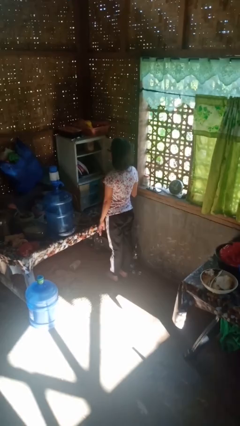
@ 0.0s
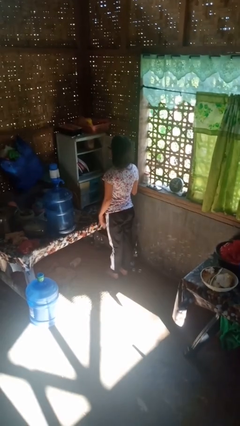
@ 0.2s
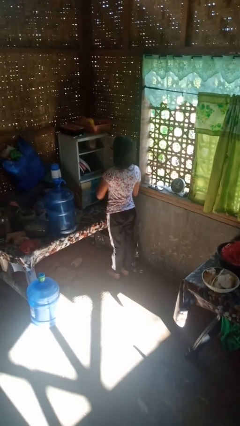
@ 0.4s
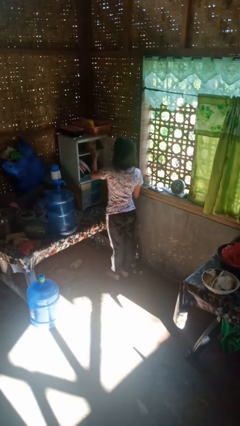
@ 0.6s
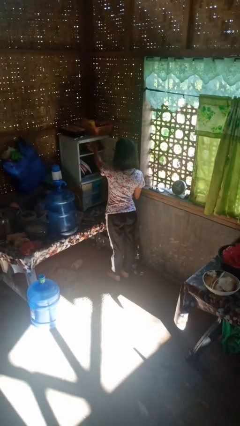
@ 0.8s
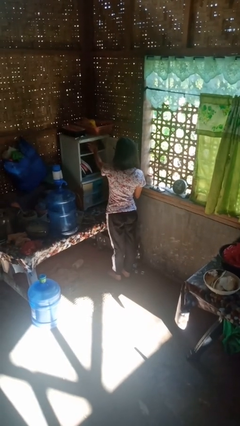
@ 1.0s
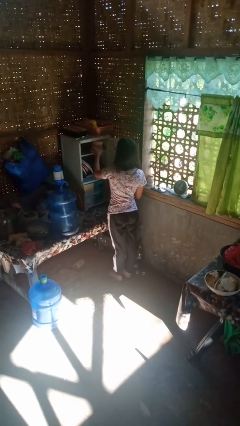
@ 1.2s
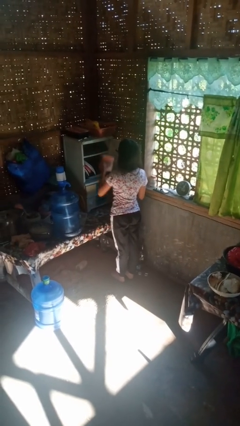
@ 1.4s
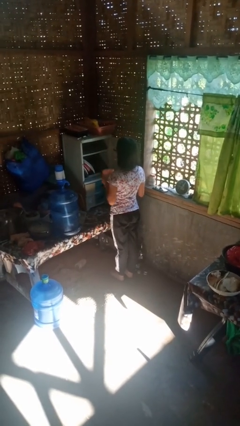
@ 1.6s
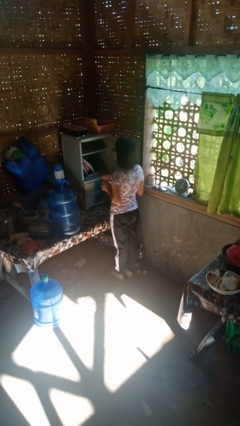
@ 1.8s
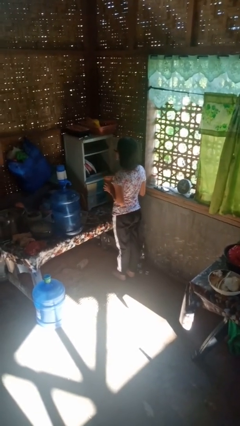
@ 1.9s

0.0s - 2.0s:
person picks up object from cabinet

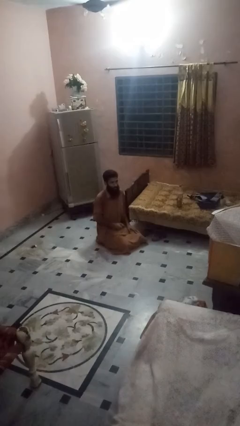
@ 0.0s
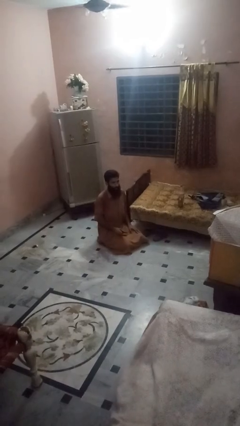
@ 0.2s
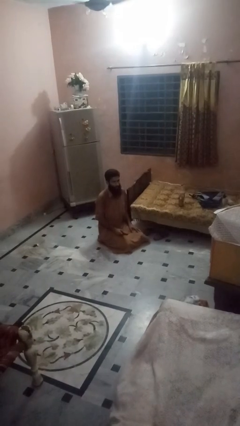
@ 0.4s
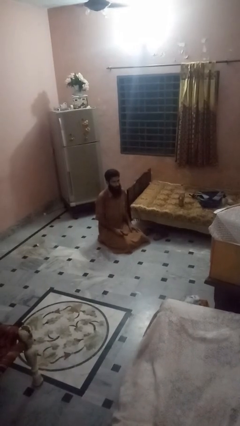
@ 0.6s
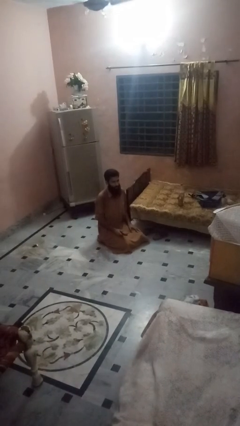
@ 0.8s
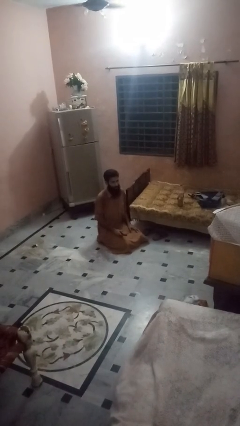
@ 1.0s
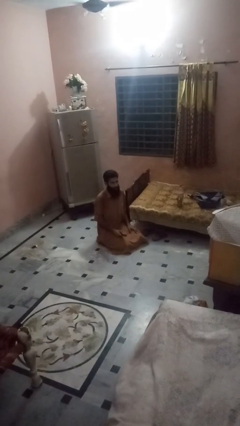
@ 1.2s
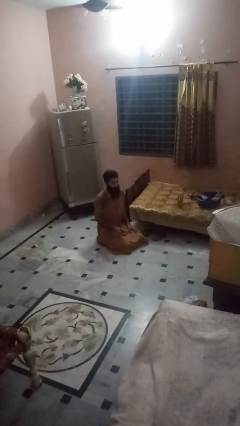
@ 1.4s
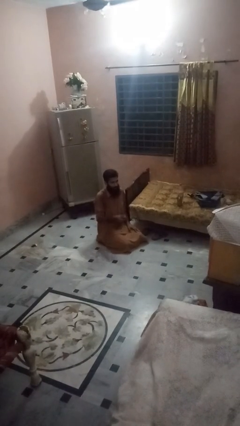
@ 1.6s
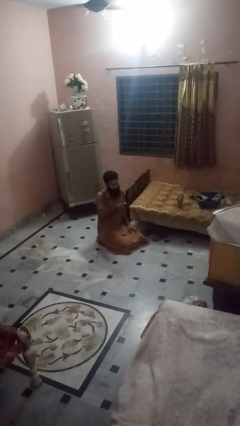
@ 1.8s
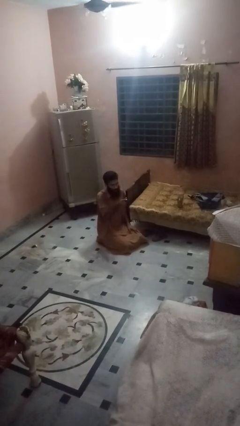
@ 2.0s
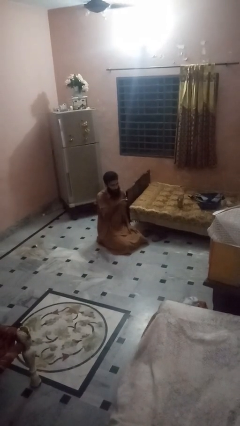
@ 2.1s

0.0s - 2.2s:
person uses television remote

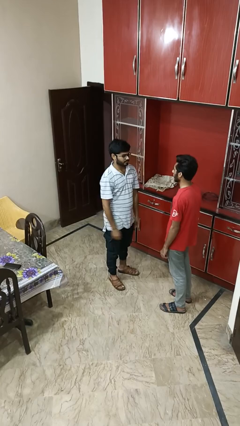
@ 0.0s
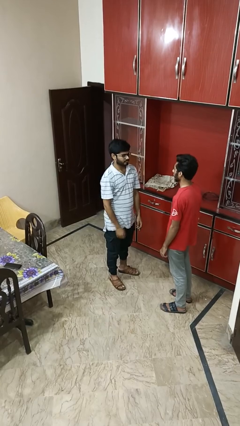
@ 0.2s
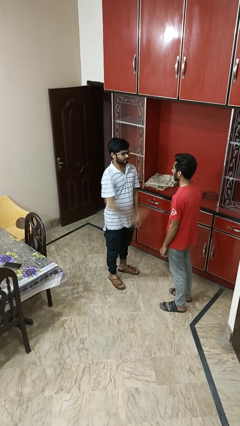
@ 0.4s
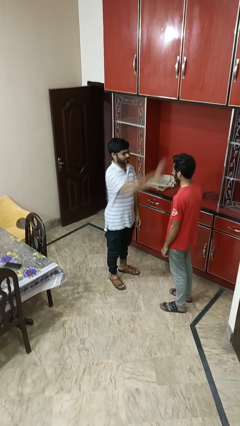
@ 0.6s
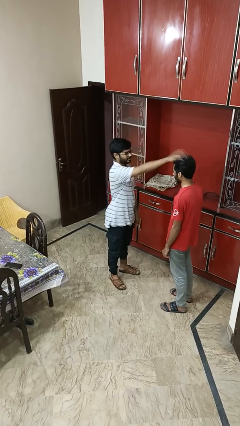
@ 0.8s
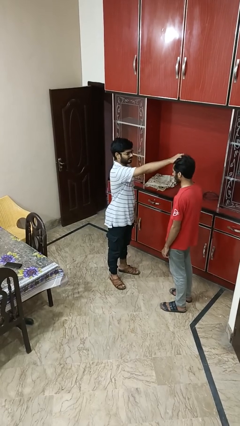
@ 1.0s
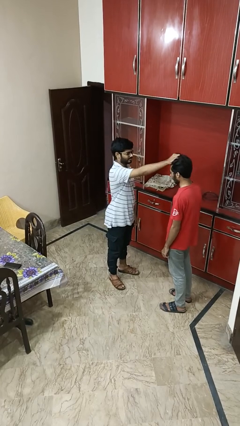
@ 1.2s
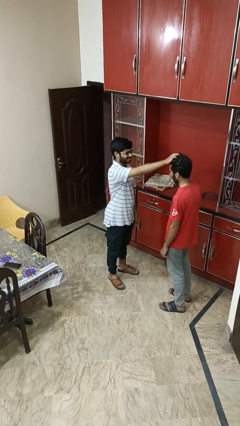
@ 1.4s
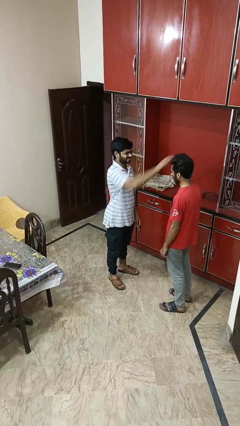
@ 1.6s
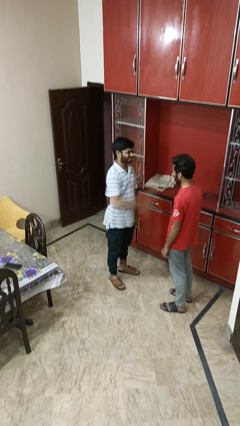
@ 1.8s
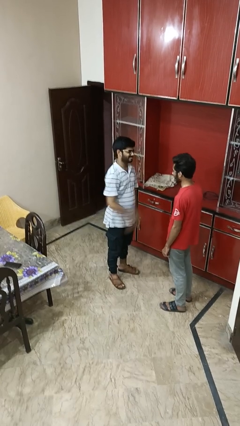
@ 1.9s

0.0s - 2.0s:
person grabs person by hair

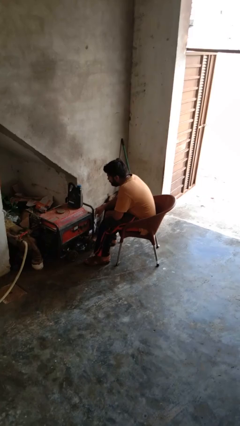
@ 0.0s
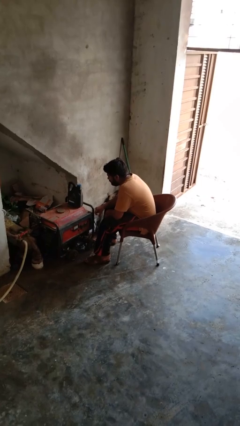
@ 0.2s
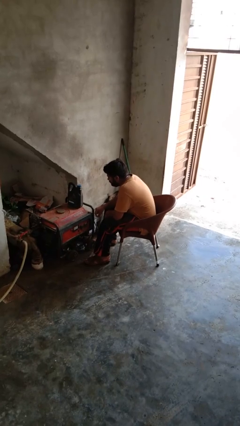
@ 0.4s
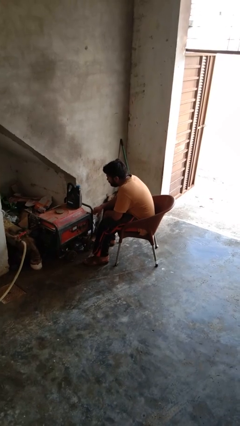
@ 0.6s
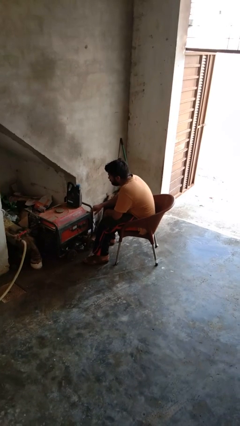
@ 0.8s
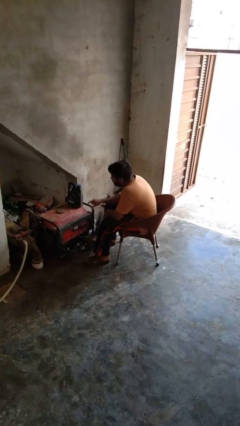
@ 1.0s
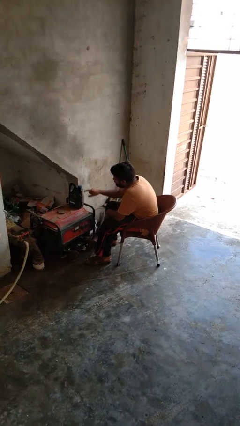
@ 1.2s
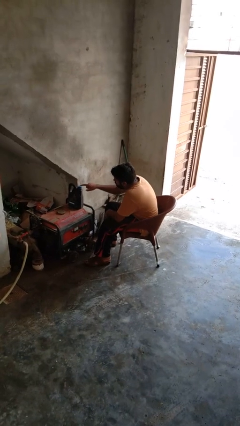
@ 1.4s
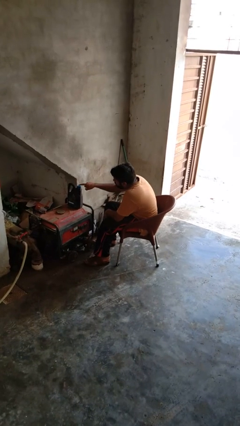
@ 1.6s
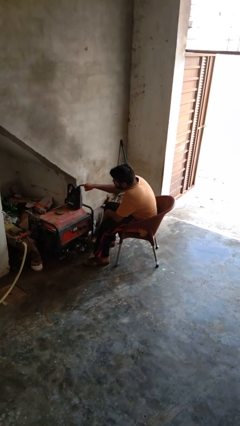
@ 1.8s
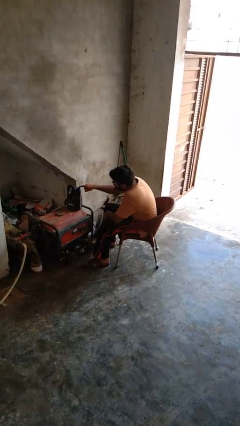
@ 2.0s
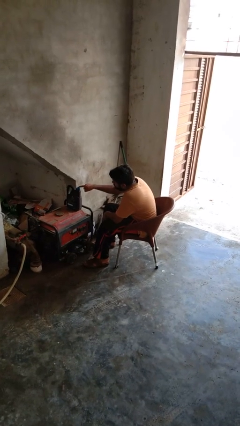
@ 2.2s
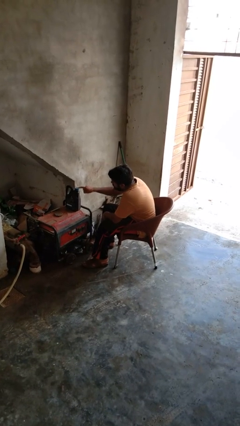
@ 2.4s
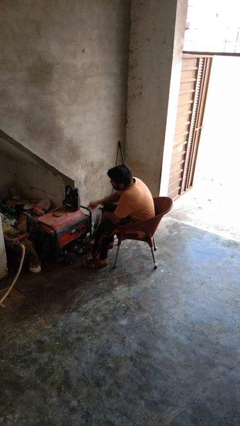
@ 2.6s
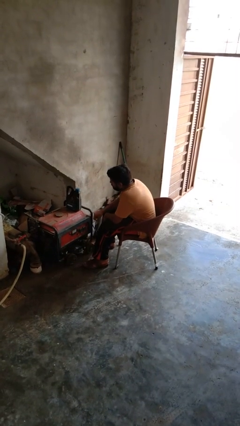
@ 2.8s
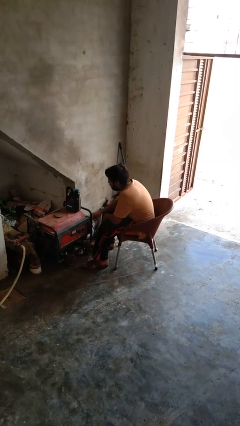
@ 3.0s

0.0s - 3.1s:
person taps object with finger

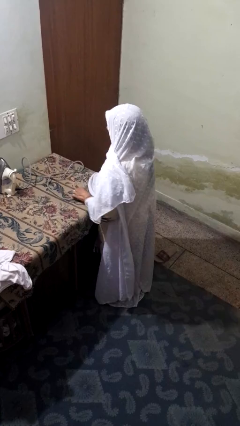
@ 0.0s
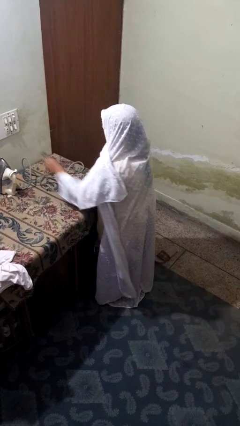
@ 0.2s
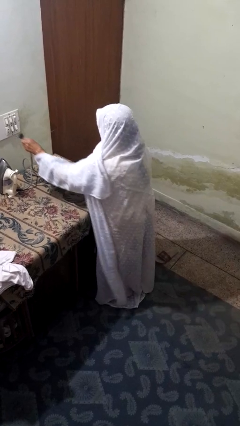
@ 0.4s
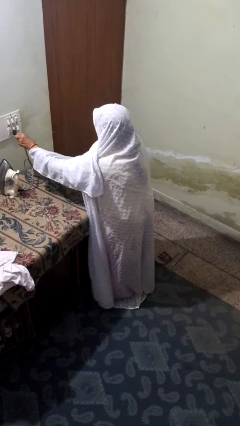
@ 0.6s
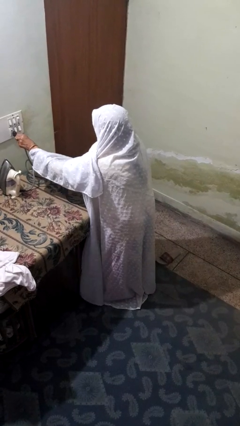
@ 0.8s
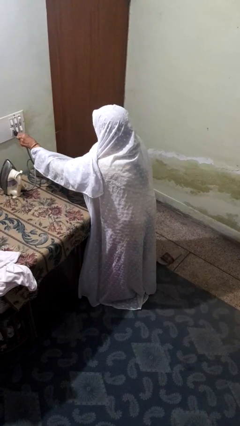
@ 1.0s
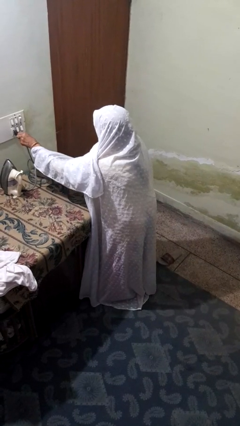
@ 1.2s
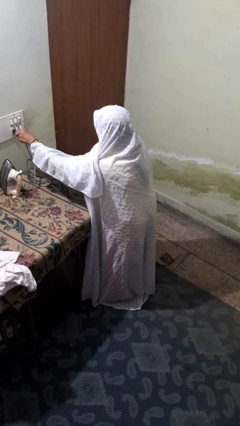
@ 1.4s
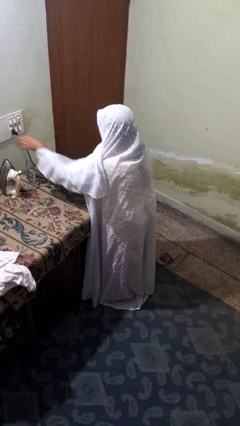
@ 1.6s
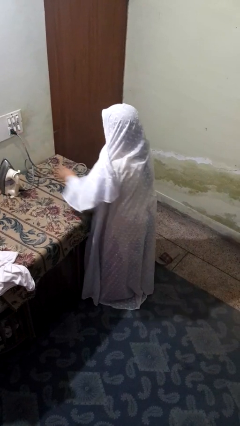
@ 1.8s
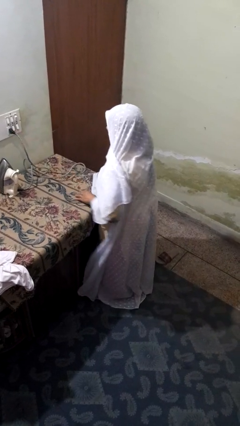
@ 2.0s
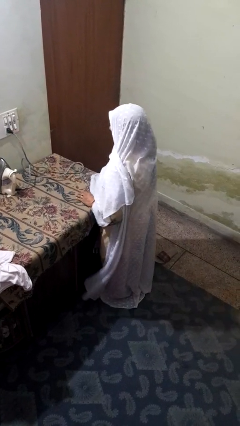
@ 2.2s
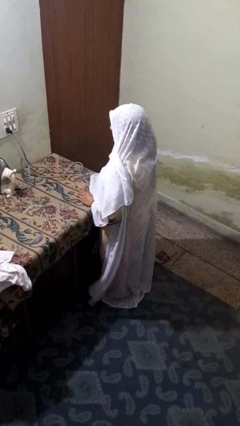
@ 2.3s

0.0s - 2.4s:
person plugs into electrical socket

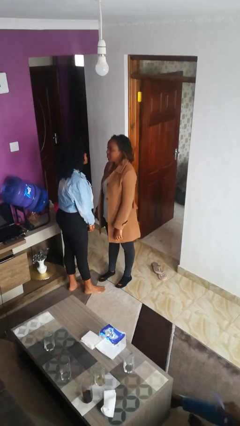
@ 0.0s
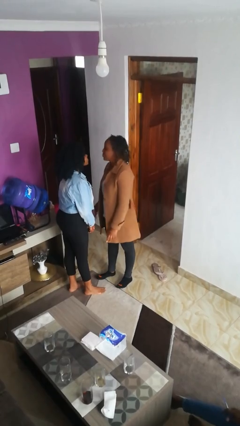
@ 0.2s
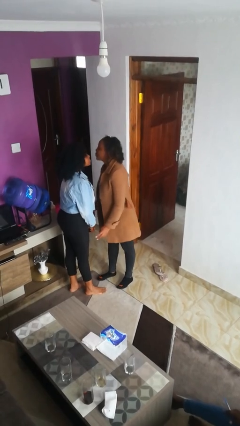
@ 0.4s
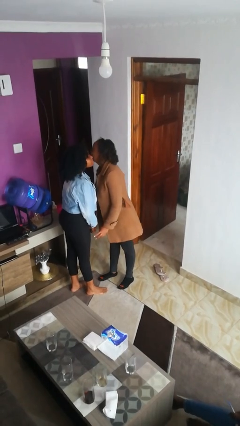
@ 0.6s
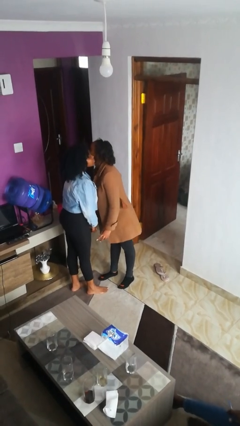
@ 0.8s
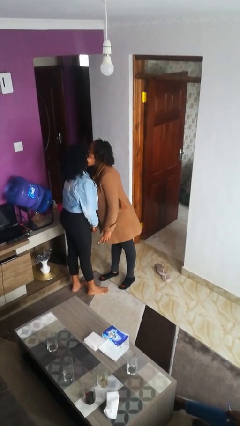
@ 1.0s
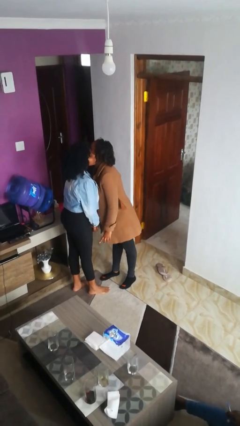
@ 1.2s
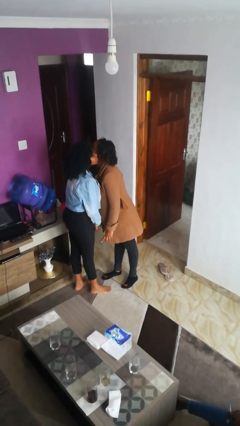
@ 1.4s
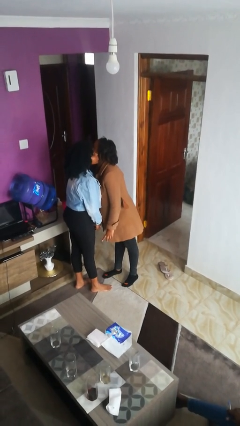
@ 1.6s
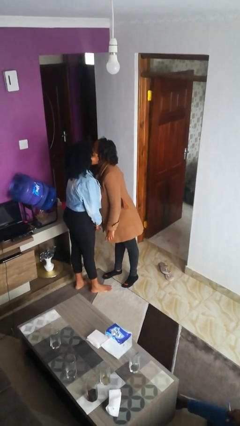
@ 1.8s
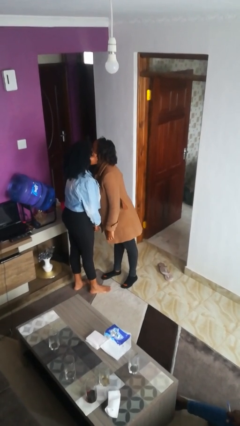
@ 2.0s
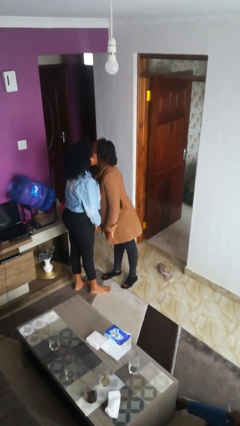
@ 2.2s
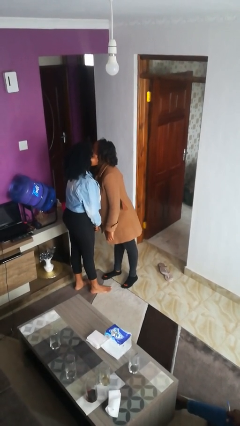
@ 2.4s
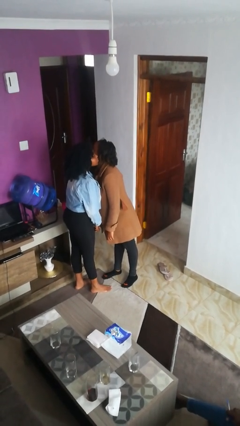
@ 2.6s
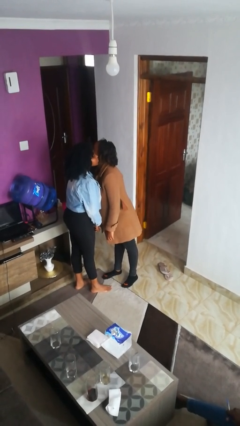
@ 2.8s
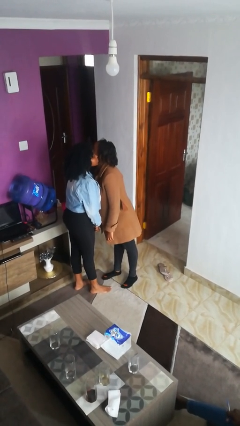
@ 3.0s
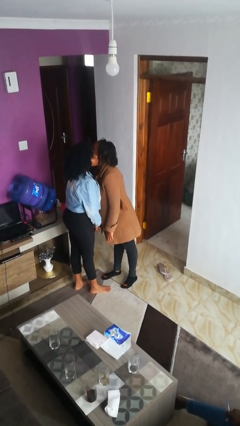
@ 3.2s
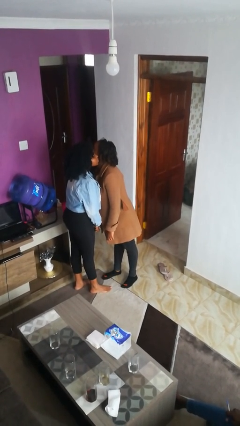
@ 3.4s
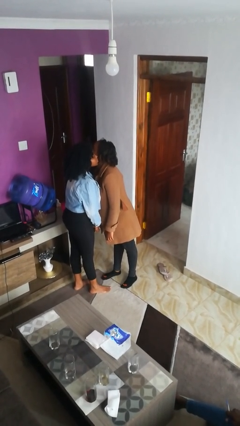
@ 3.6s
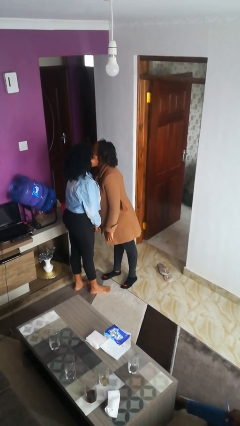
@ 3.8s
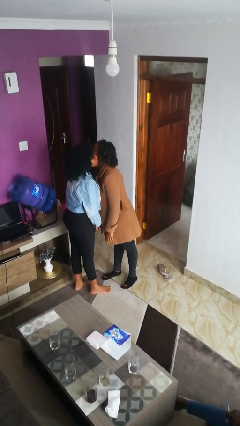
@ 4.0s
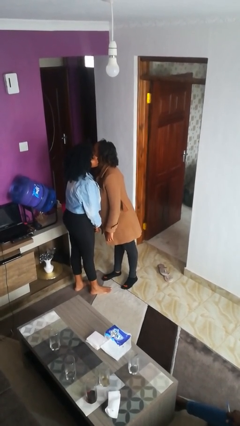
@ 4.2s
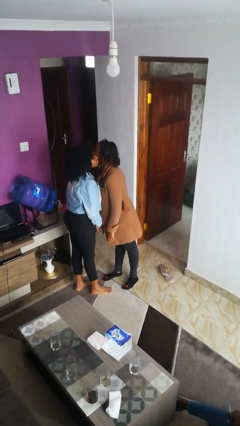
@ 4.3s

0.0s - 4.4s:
person kisses cheek of person

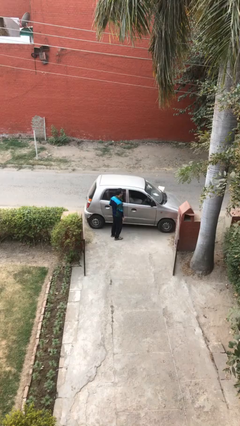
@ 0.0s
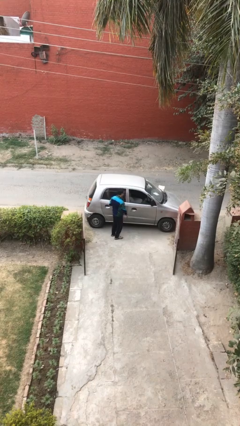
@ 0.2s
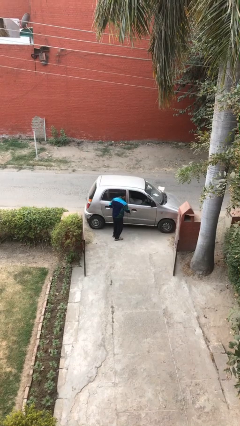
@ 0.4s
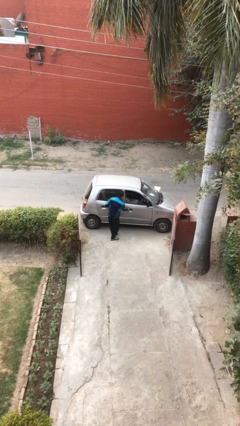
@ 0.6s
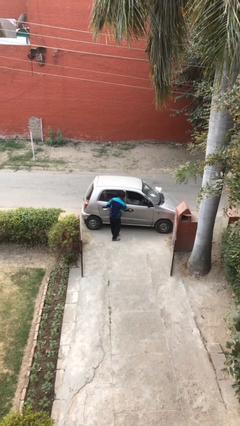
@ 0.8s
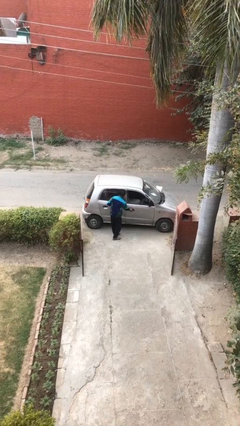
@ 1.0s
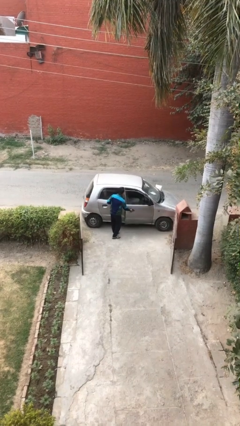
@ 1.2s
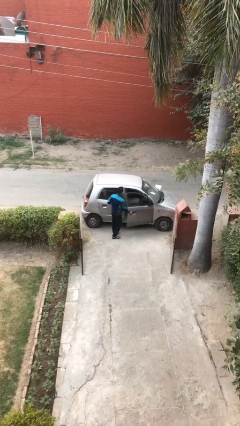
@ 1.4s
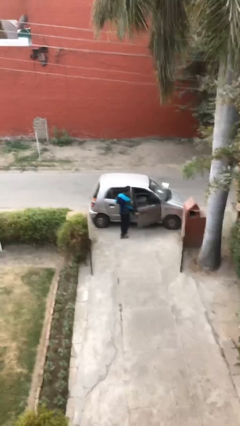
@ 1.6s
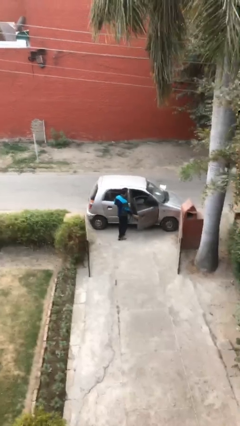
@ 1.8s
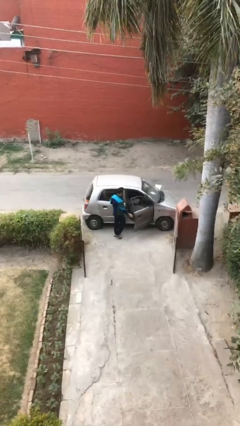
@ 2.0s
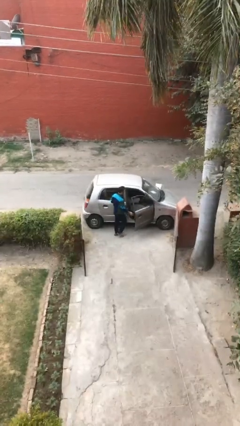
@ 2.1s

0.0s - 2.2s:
person opens car door
